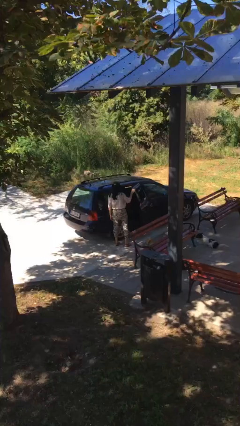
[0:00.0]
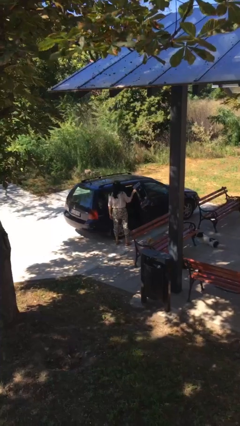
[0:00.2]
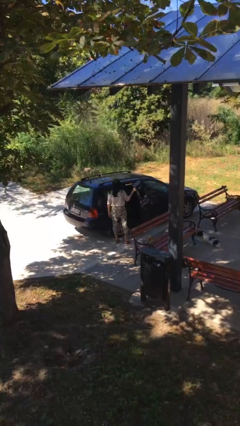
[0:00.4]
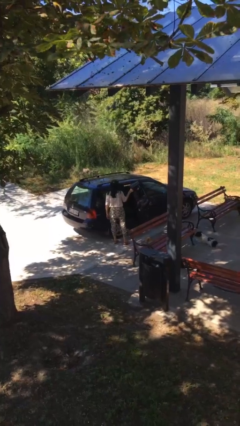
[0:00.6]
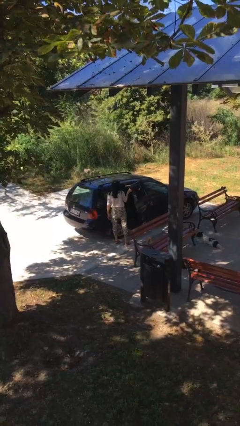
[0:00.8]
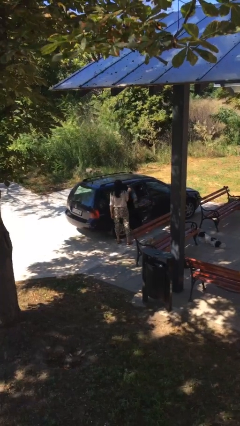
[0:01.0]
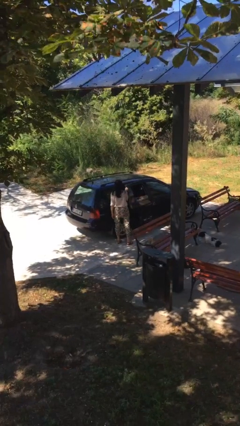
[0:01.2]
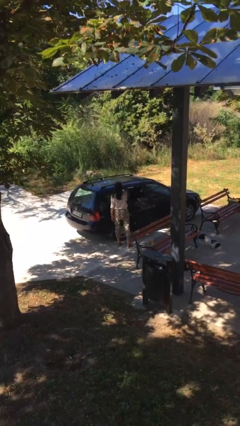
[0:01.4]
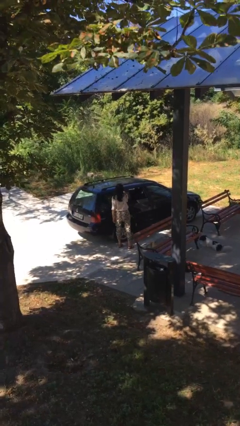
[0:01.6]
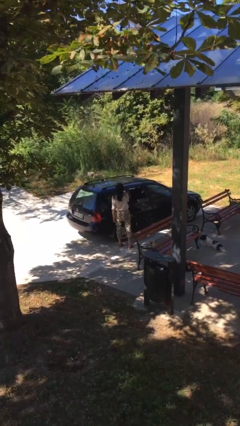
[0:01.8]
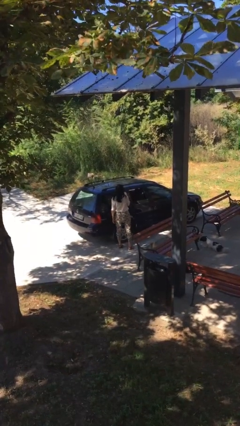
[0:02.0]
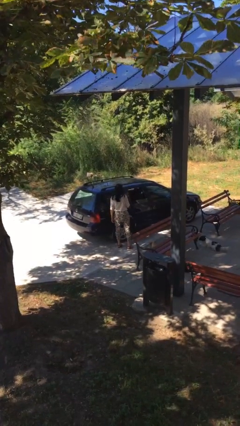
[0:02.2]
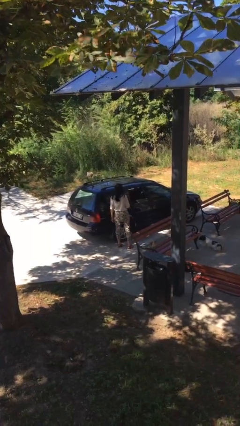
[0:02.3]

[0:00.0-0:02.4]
person closes car door

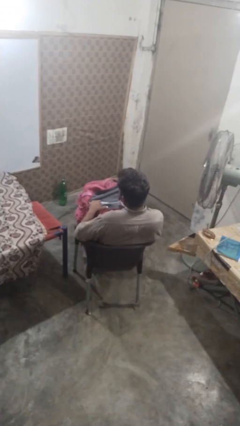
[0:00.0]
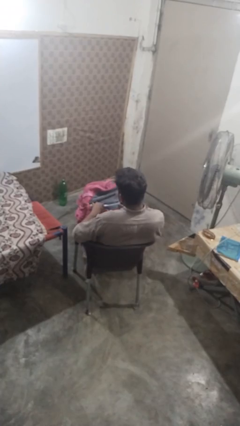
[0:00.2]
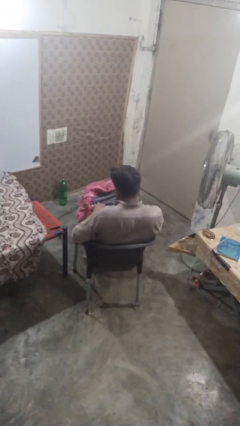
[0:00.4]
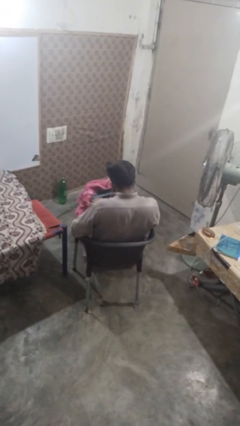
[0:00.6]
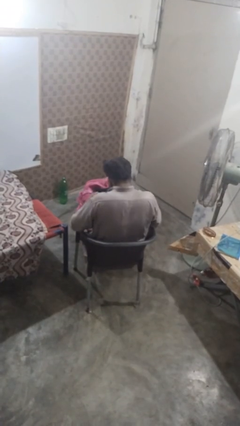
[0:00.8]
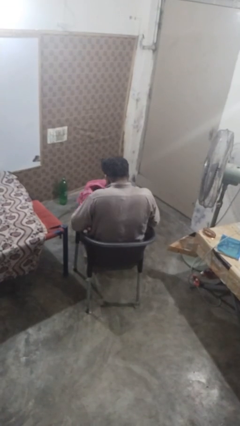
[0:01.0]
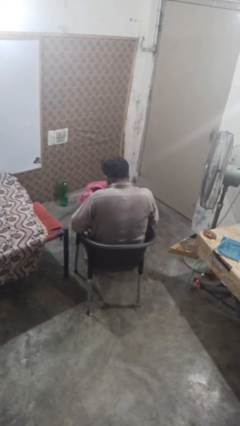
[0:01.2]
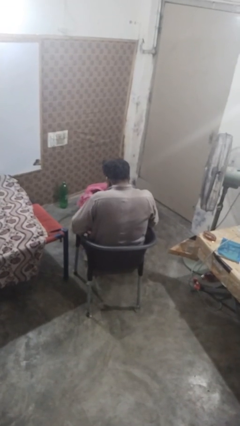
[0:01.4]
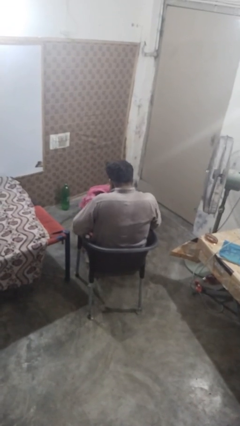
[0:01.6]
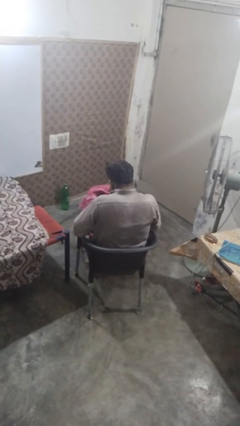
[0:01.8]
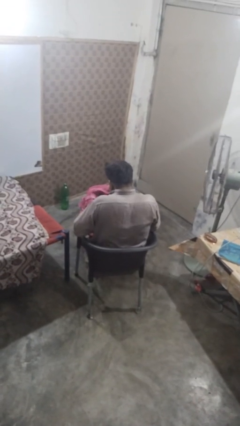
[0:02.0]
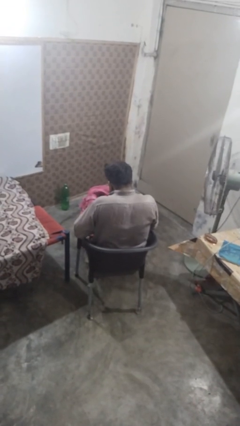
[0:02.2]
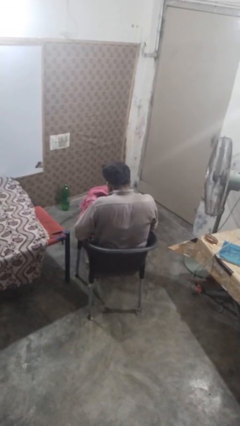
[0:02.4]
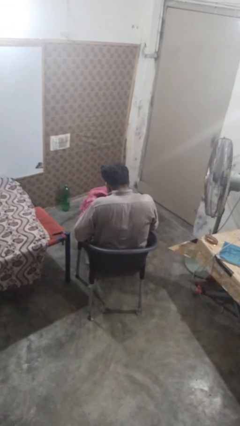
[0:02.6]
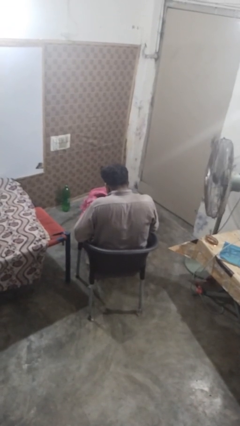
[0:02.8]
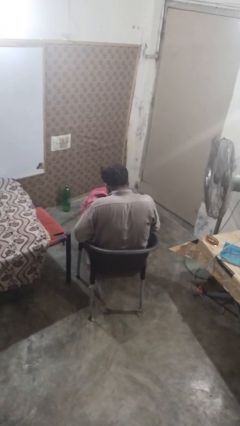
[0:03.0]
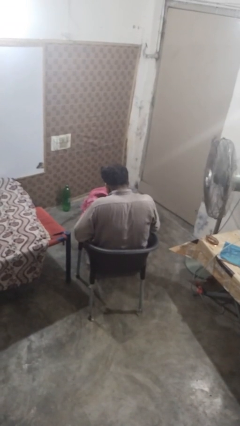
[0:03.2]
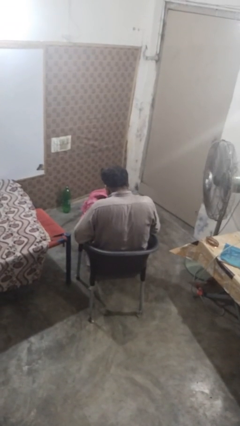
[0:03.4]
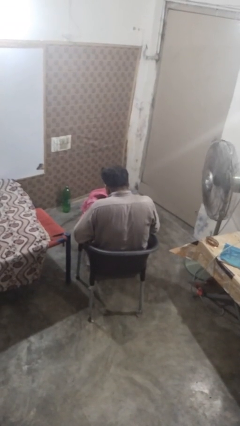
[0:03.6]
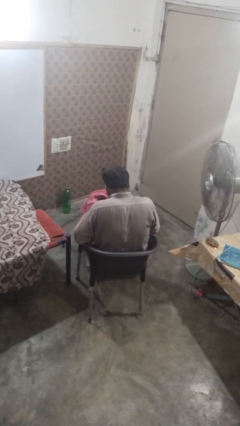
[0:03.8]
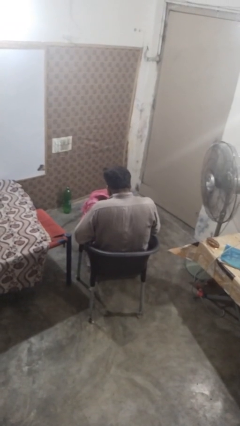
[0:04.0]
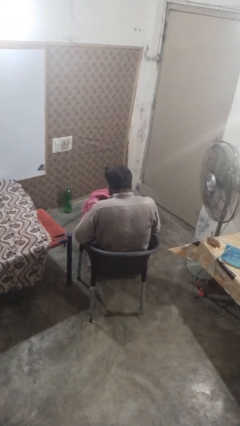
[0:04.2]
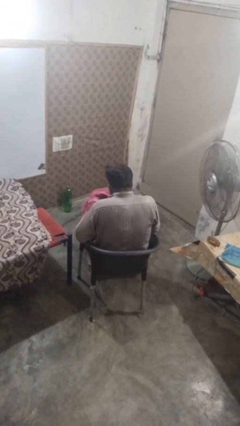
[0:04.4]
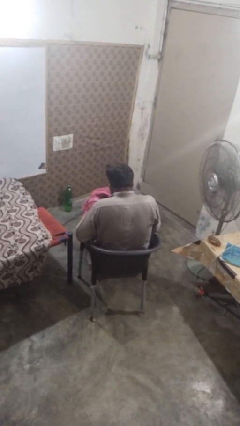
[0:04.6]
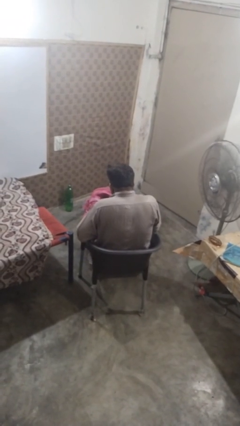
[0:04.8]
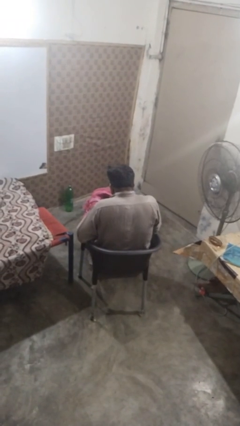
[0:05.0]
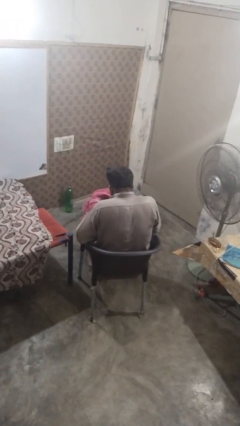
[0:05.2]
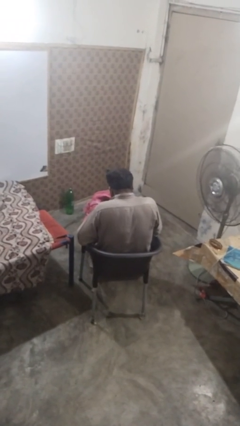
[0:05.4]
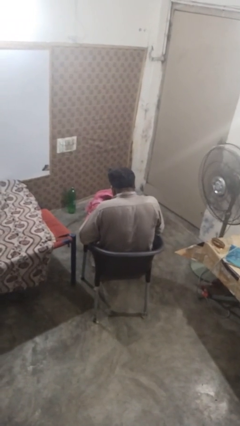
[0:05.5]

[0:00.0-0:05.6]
person searches in backpack

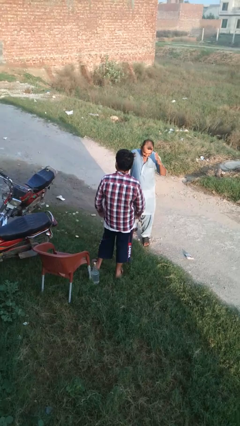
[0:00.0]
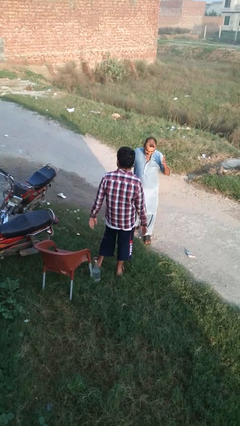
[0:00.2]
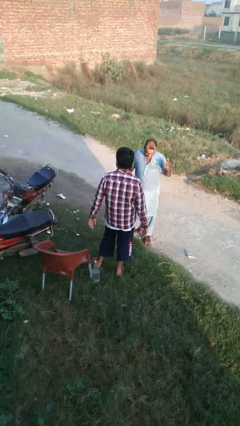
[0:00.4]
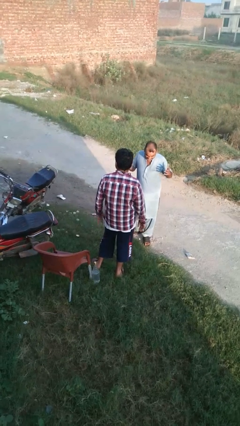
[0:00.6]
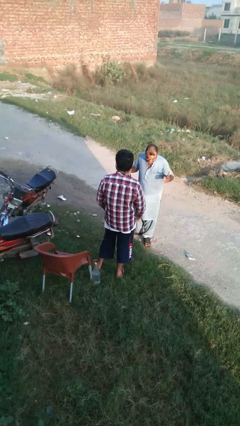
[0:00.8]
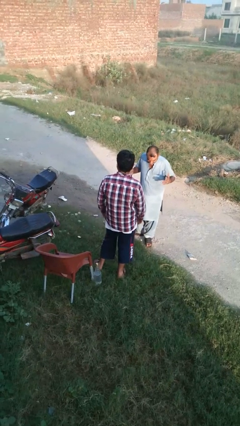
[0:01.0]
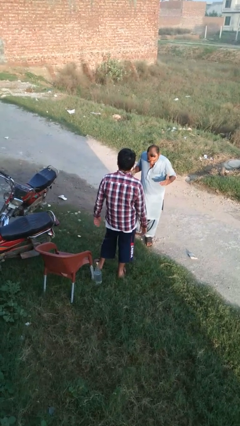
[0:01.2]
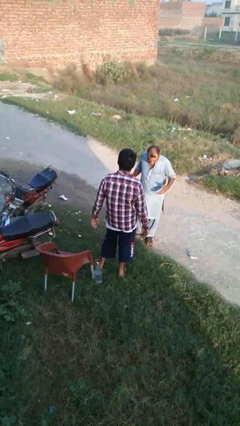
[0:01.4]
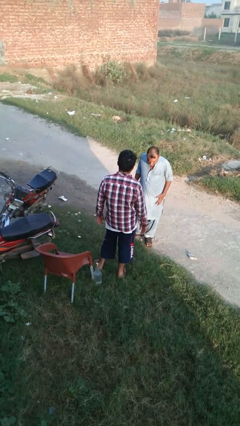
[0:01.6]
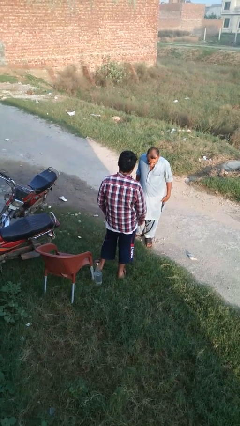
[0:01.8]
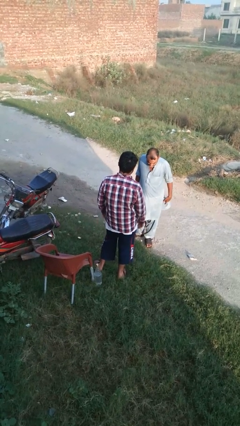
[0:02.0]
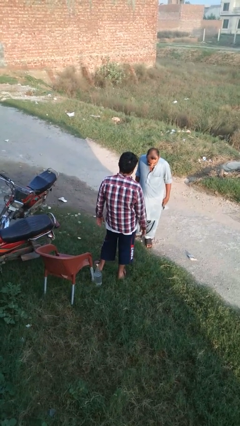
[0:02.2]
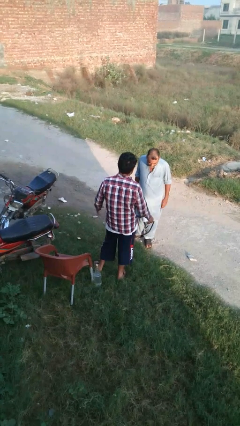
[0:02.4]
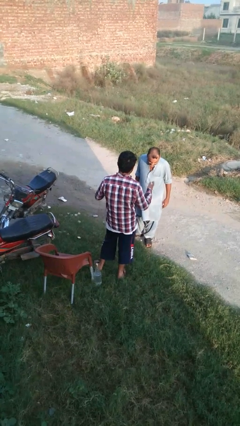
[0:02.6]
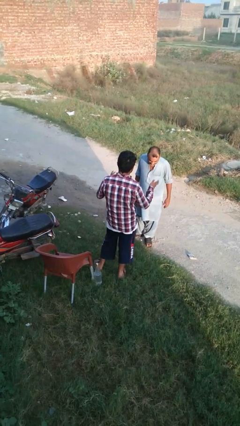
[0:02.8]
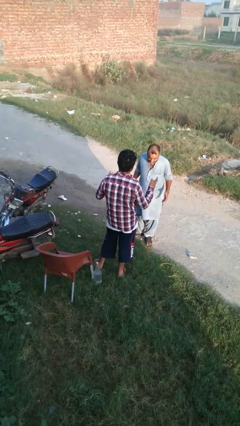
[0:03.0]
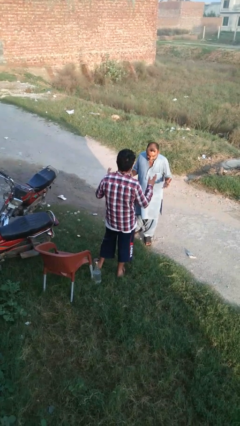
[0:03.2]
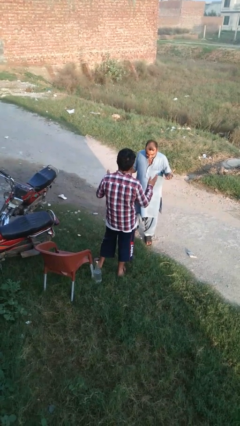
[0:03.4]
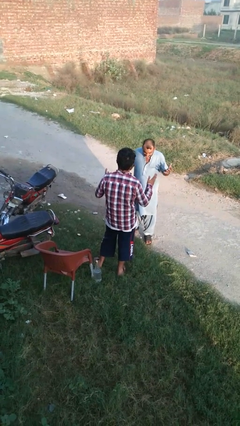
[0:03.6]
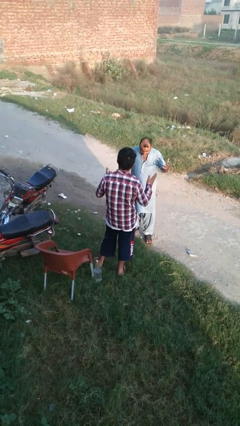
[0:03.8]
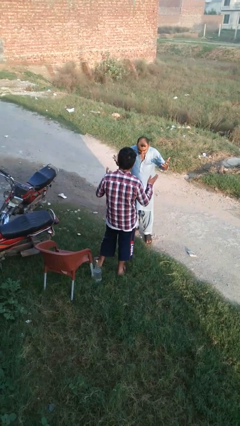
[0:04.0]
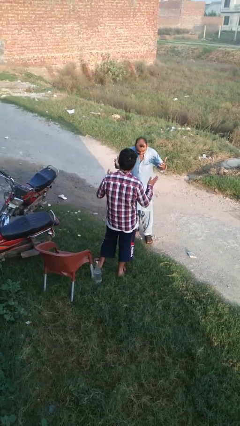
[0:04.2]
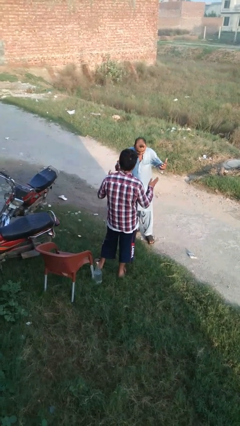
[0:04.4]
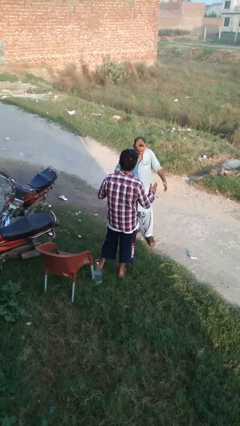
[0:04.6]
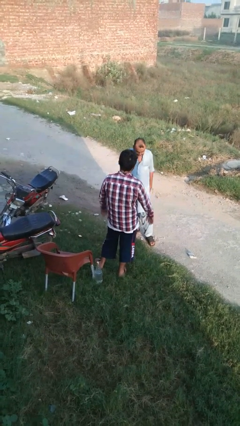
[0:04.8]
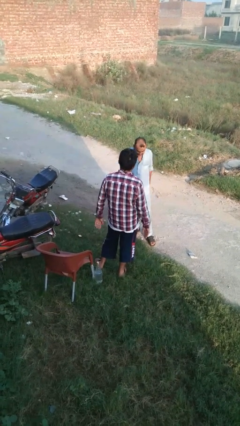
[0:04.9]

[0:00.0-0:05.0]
person laughs with person

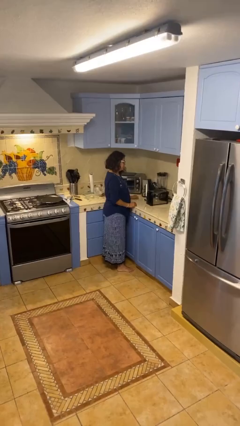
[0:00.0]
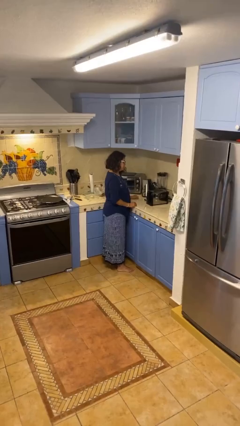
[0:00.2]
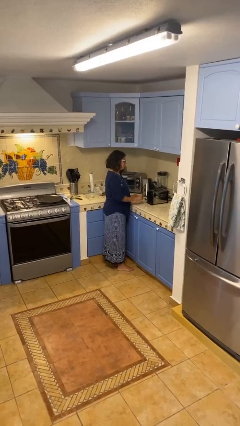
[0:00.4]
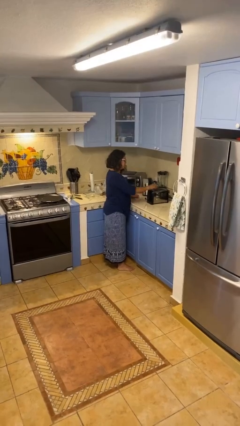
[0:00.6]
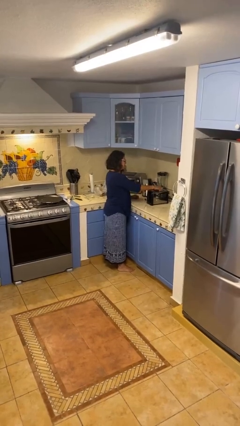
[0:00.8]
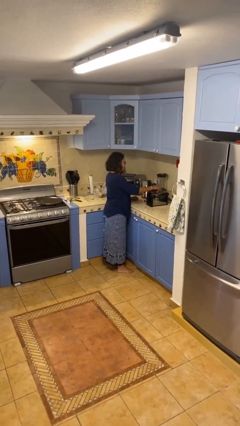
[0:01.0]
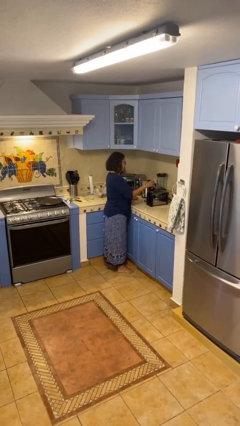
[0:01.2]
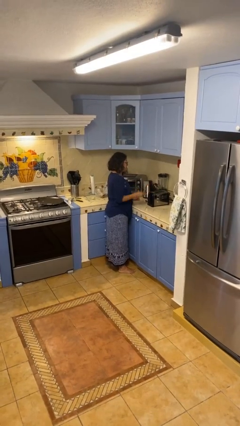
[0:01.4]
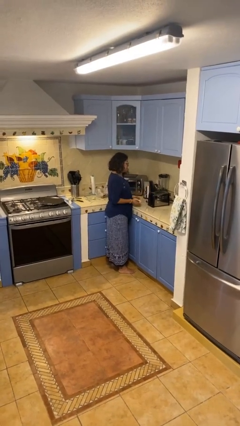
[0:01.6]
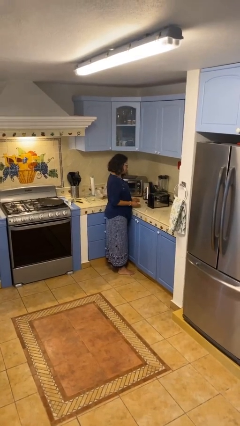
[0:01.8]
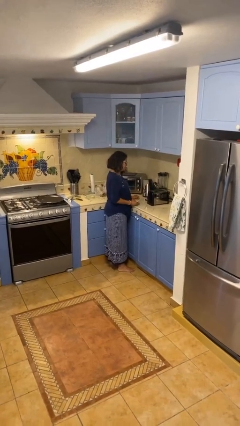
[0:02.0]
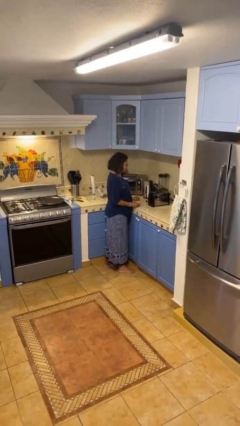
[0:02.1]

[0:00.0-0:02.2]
person takes object from toaster

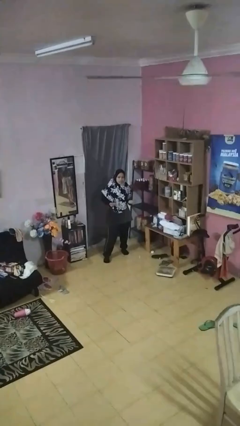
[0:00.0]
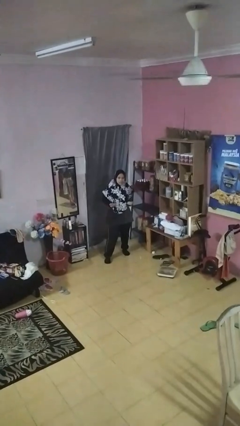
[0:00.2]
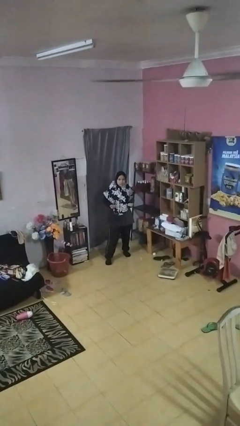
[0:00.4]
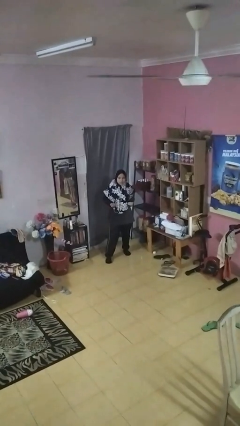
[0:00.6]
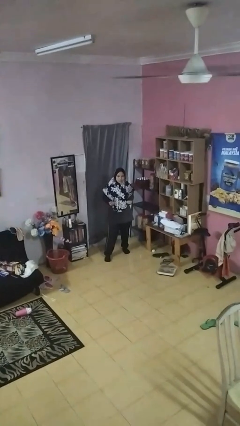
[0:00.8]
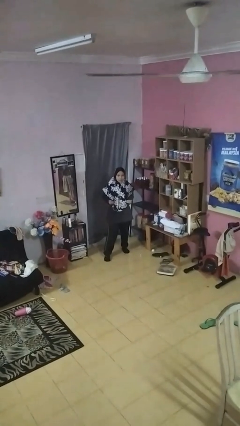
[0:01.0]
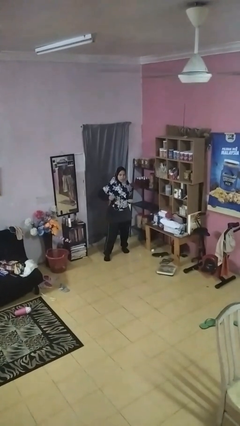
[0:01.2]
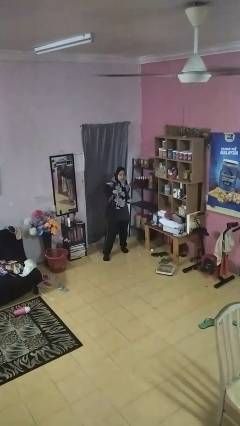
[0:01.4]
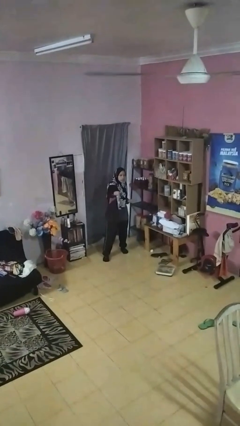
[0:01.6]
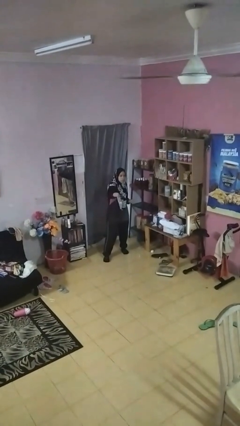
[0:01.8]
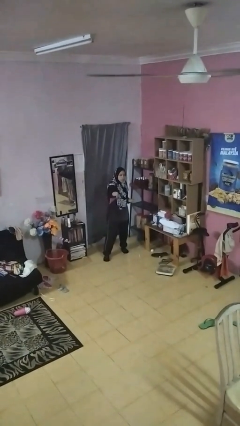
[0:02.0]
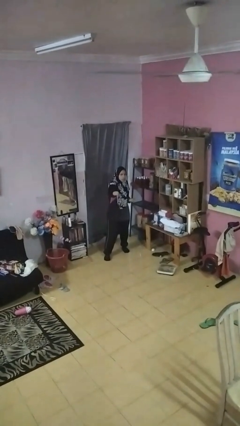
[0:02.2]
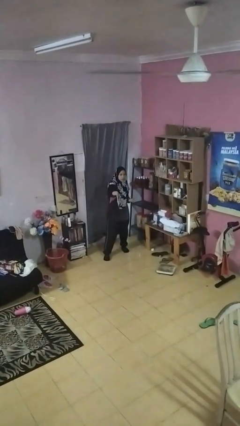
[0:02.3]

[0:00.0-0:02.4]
person punches
